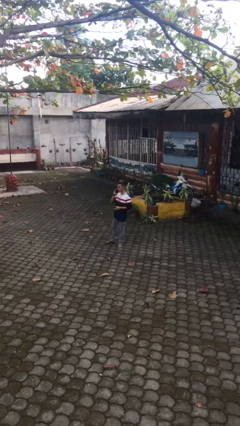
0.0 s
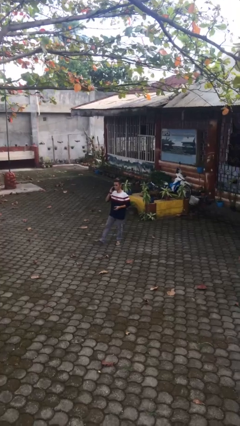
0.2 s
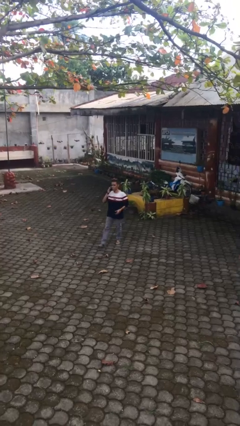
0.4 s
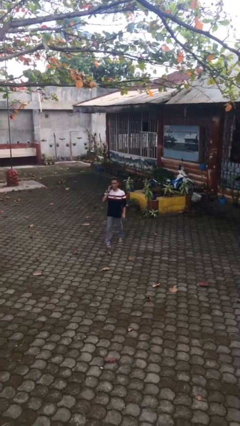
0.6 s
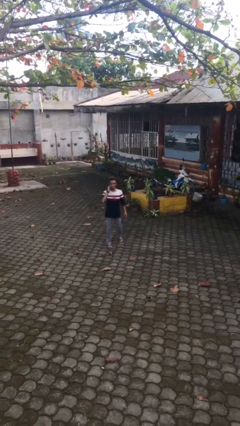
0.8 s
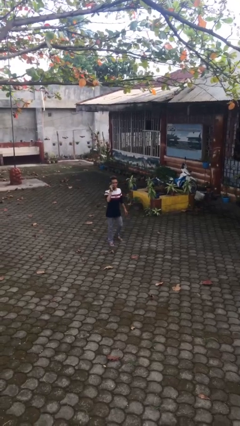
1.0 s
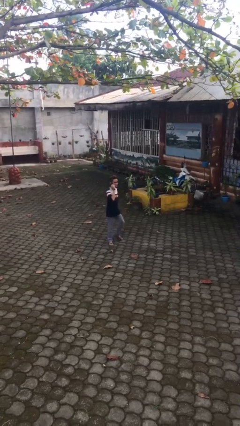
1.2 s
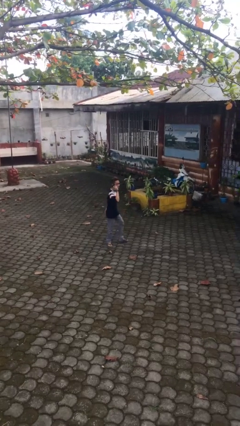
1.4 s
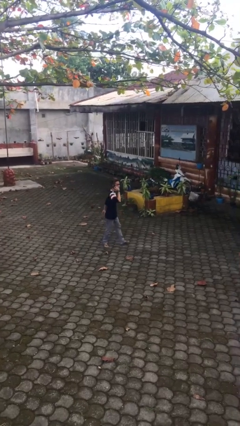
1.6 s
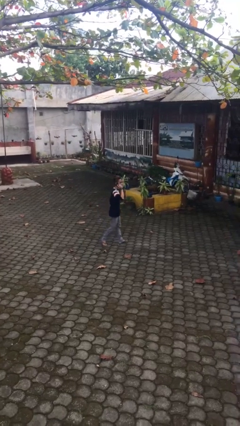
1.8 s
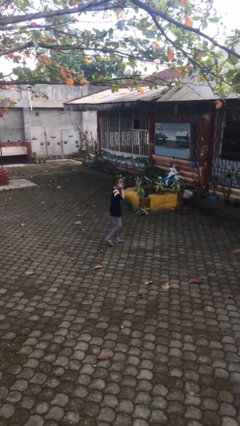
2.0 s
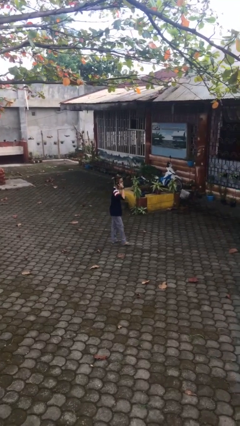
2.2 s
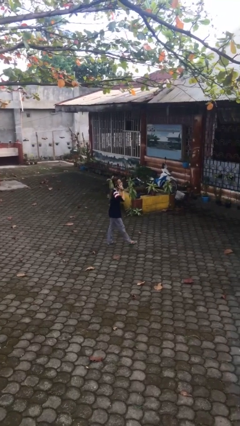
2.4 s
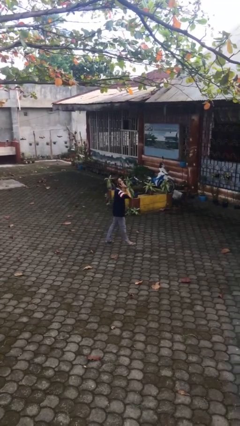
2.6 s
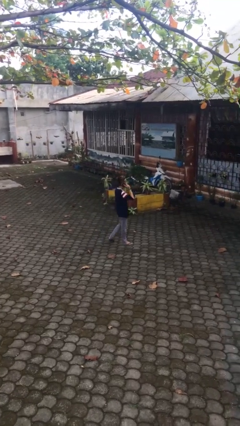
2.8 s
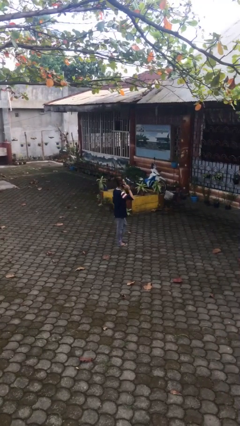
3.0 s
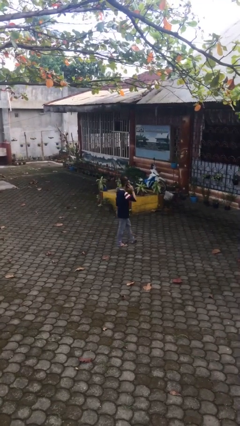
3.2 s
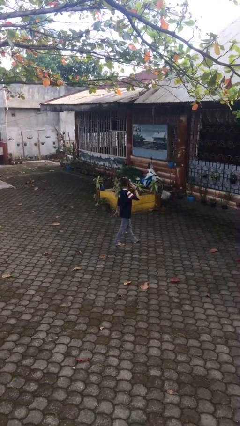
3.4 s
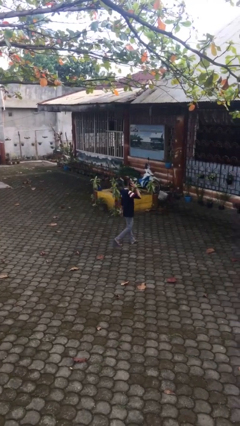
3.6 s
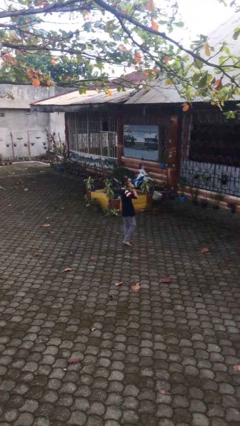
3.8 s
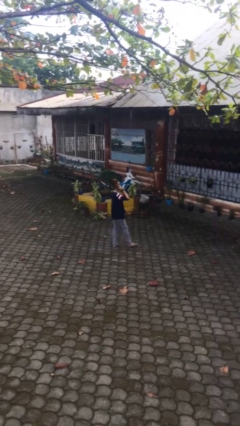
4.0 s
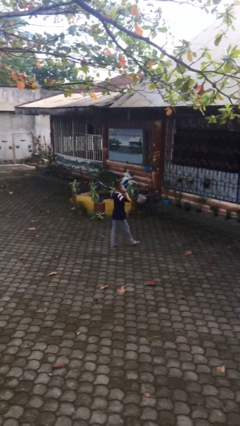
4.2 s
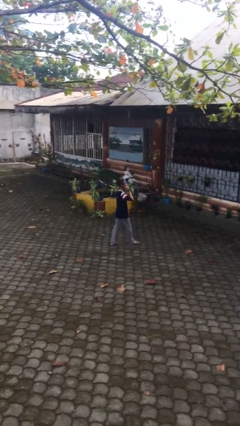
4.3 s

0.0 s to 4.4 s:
person talks on phone

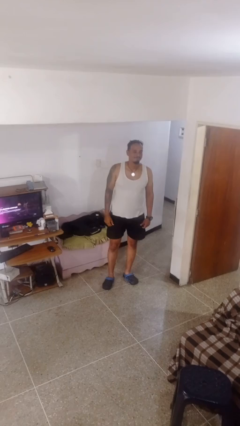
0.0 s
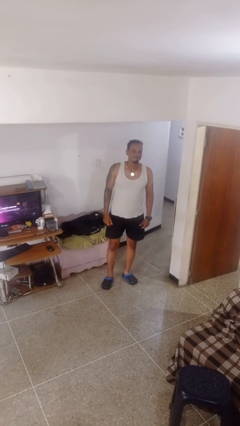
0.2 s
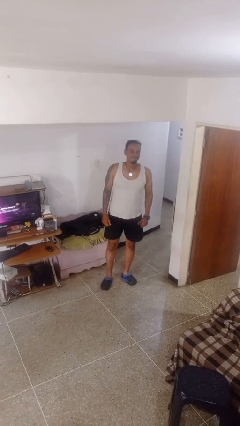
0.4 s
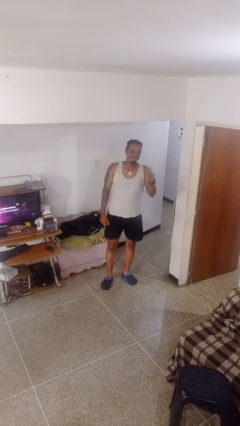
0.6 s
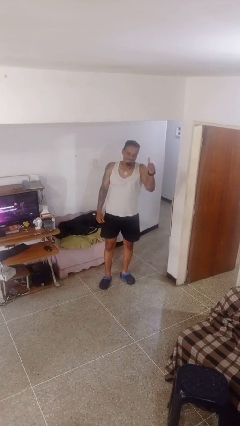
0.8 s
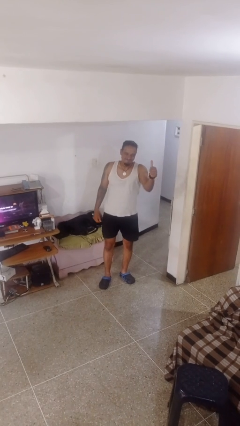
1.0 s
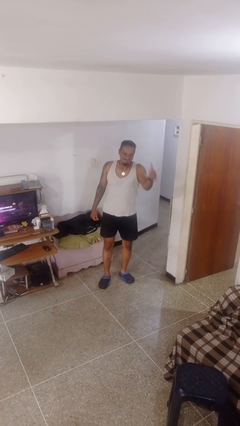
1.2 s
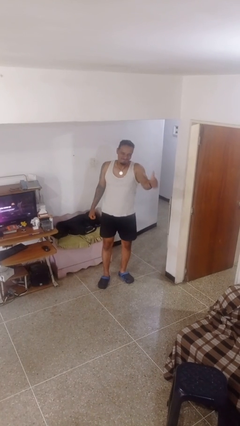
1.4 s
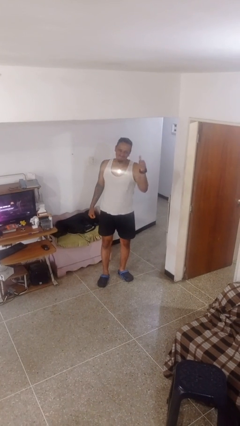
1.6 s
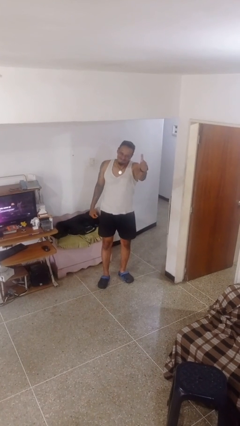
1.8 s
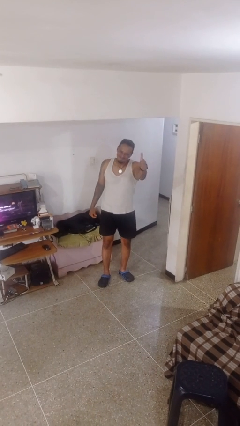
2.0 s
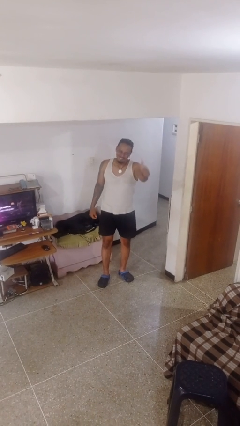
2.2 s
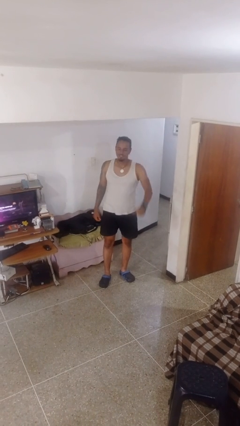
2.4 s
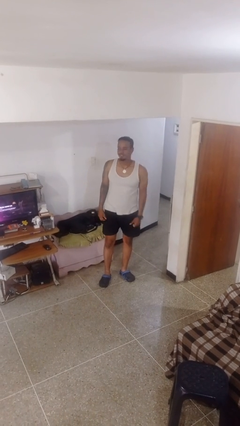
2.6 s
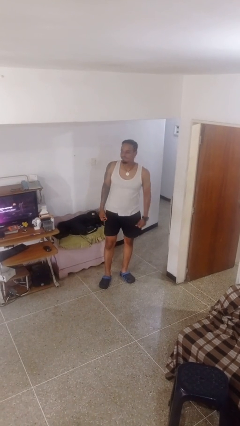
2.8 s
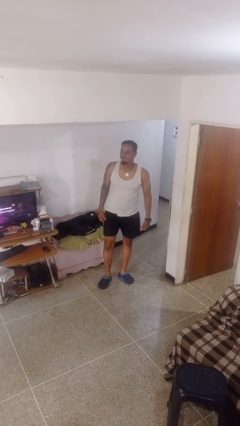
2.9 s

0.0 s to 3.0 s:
person gestures thumbs up

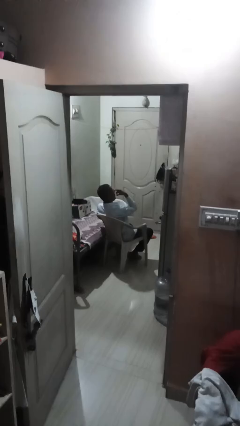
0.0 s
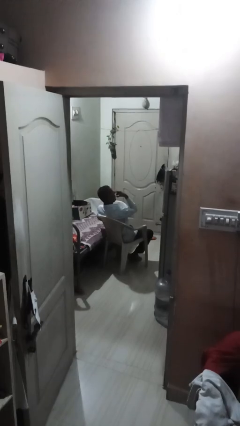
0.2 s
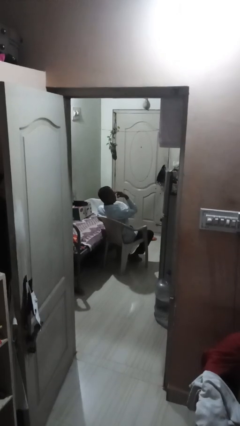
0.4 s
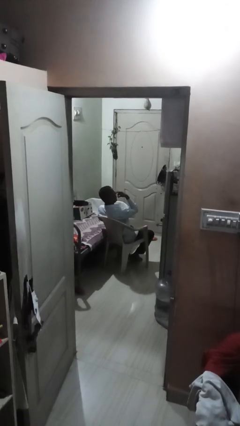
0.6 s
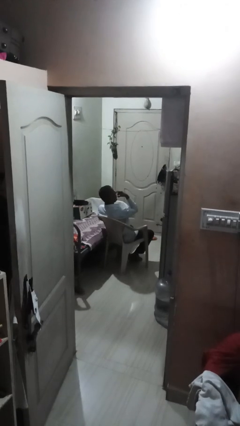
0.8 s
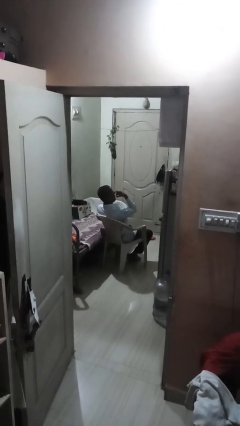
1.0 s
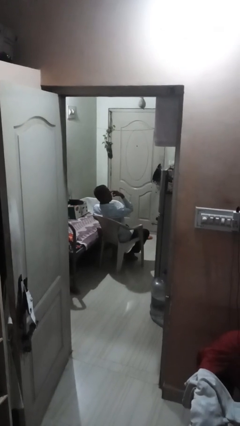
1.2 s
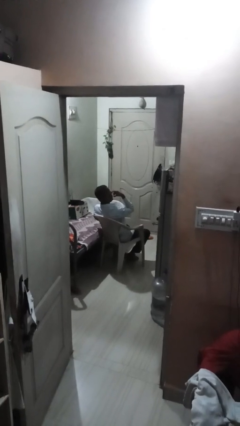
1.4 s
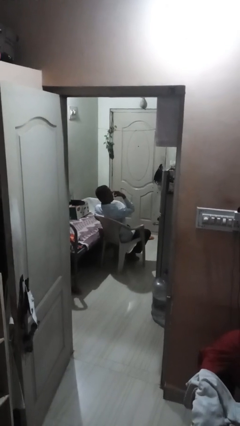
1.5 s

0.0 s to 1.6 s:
person gestures watch closely

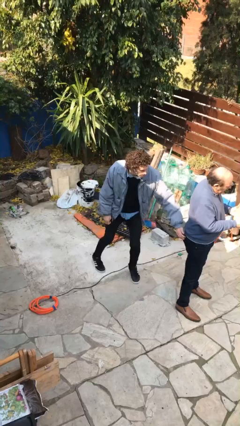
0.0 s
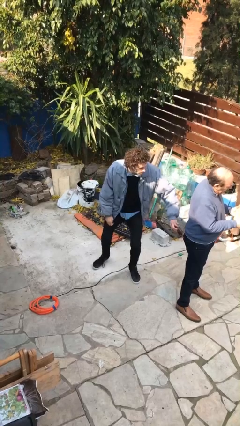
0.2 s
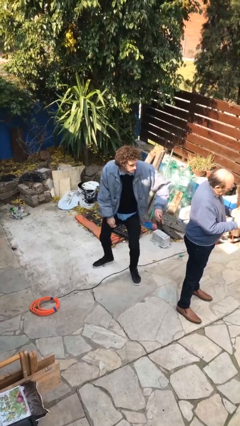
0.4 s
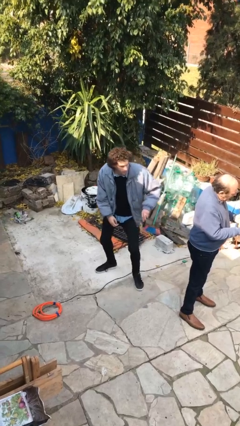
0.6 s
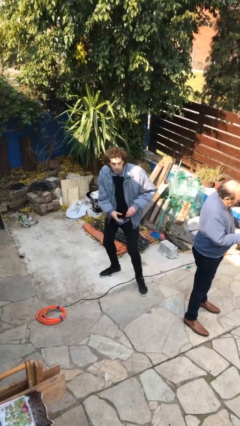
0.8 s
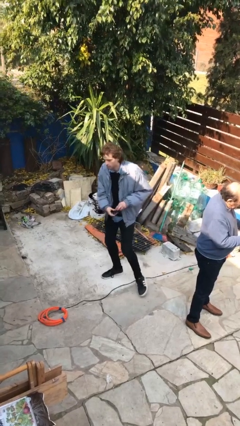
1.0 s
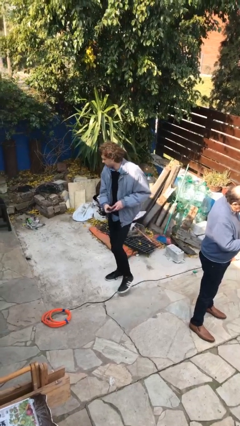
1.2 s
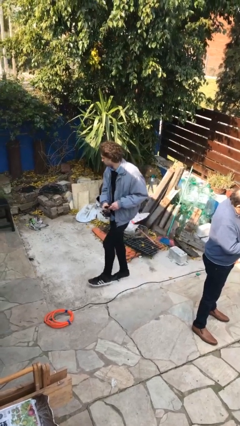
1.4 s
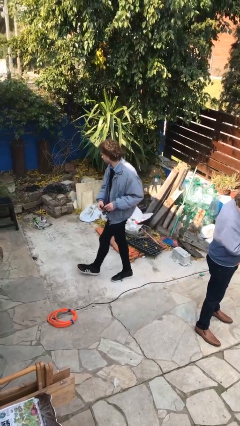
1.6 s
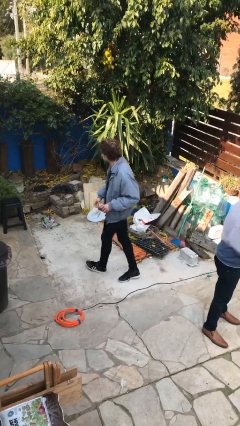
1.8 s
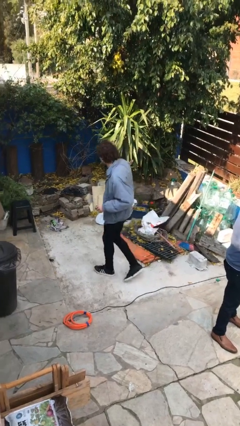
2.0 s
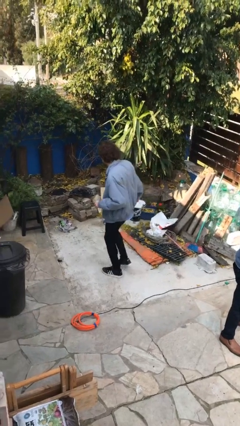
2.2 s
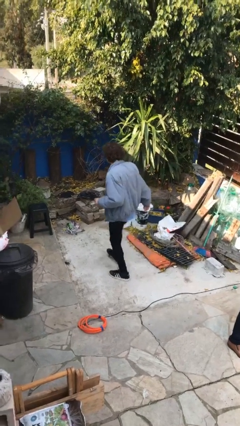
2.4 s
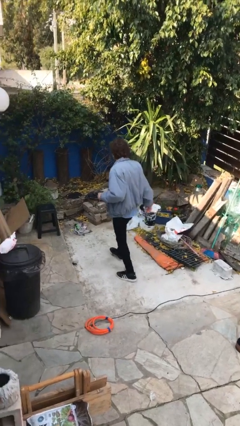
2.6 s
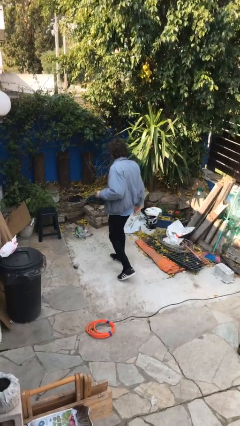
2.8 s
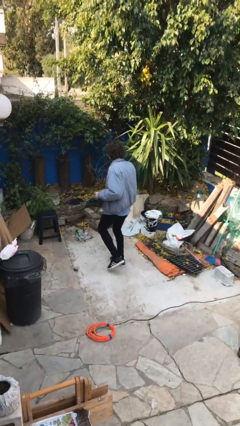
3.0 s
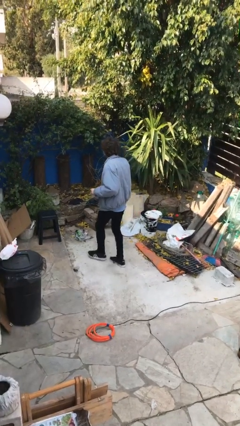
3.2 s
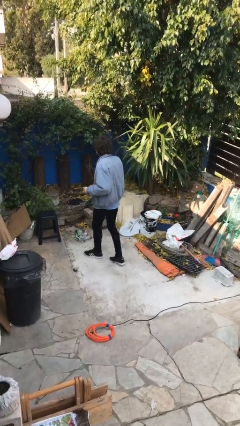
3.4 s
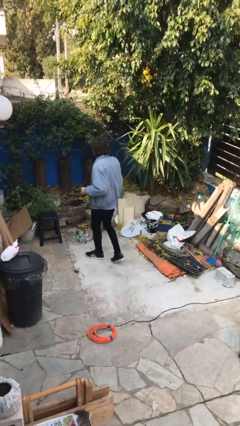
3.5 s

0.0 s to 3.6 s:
person steals object from person

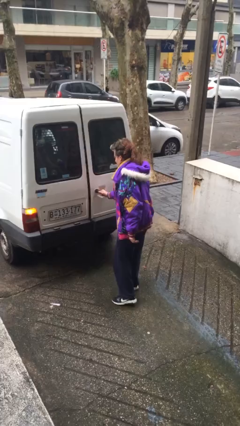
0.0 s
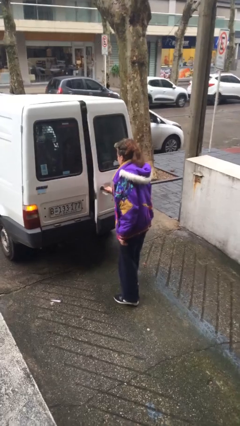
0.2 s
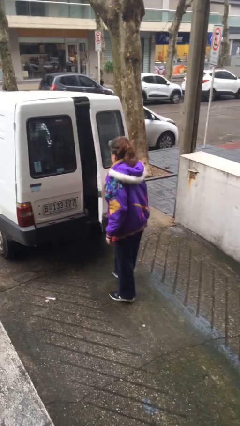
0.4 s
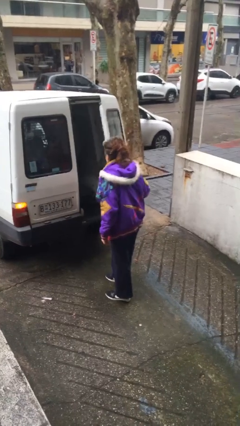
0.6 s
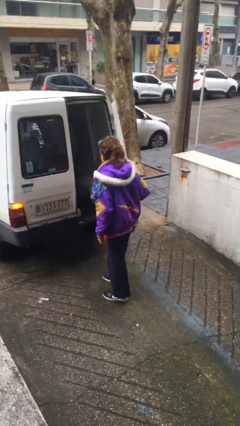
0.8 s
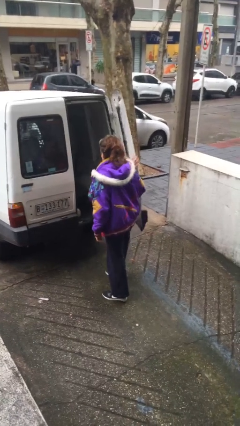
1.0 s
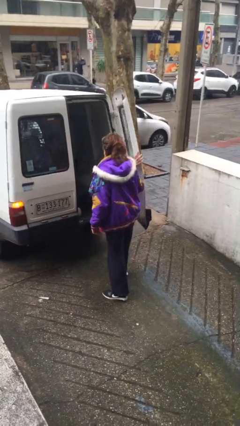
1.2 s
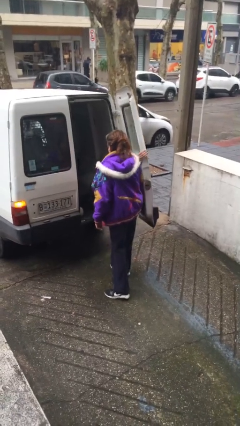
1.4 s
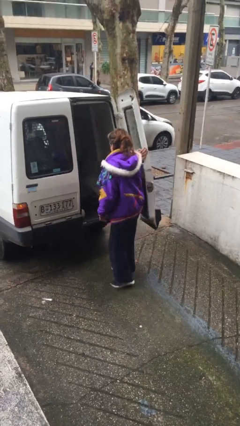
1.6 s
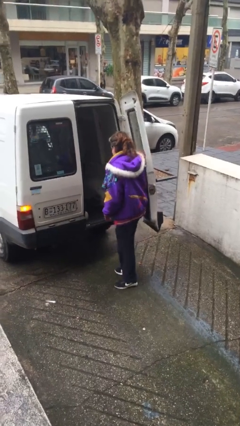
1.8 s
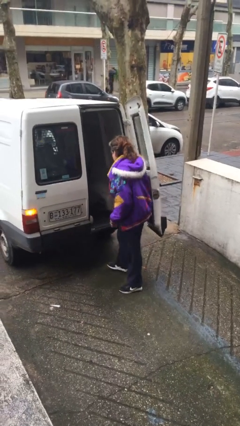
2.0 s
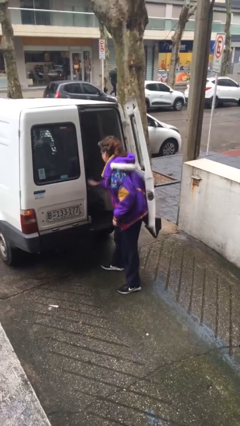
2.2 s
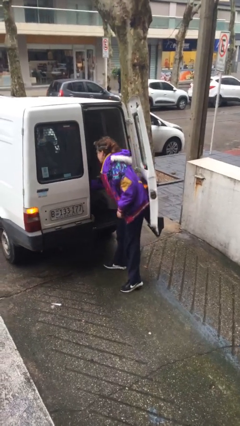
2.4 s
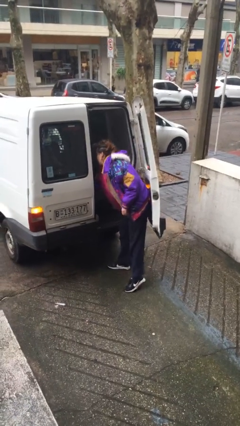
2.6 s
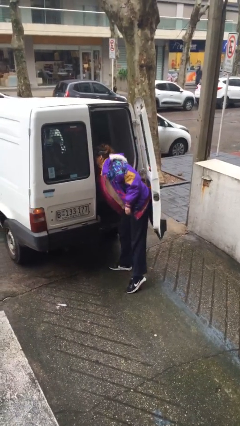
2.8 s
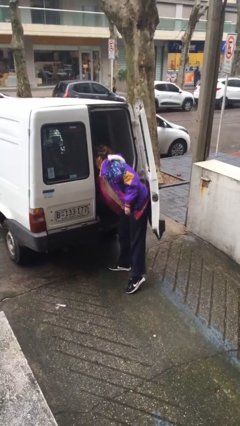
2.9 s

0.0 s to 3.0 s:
person opens car door

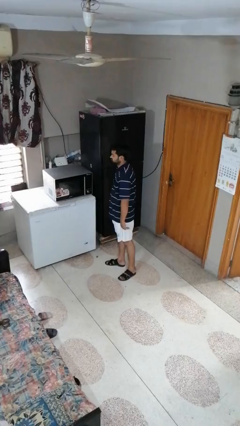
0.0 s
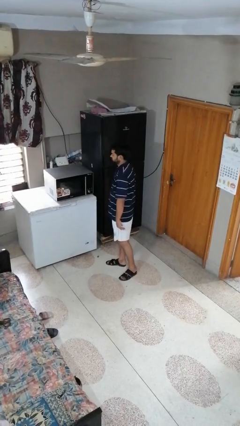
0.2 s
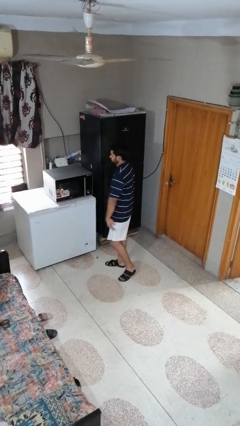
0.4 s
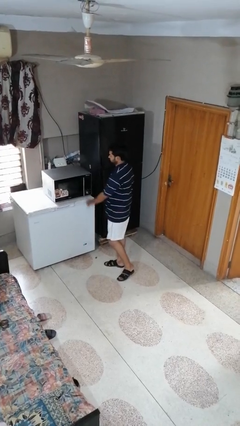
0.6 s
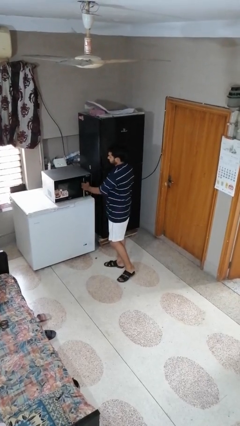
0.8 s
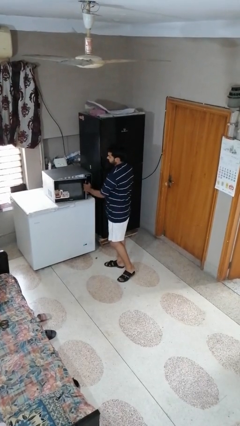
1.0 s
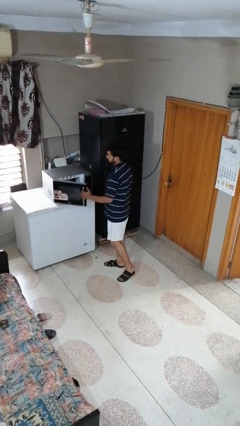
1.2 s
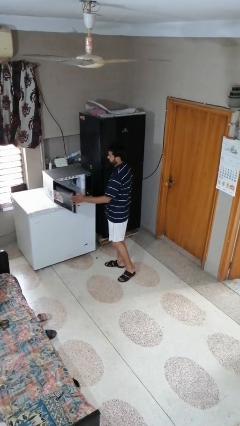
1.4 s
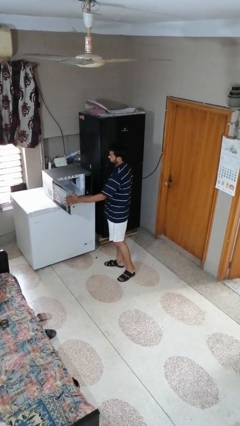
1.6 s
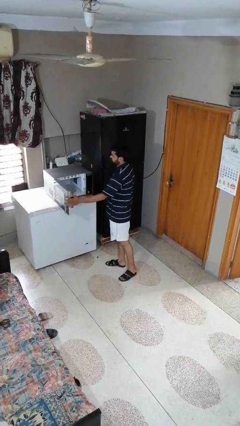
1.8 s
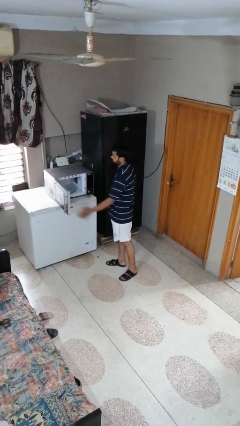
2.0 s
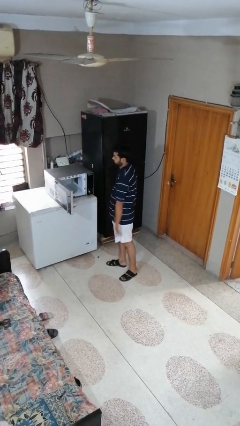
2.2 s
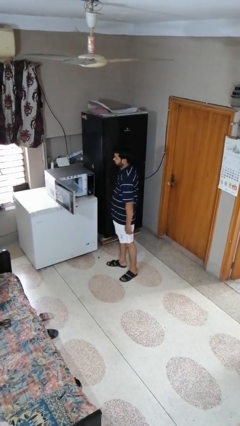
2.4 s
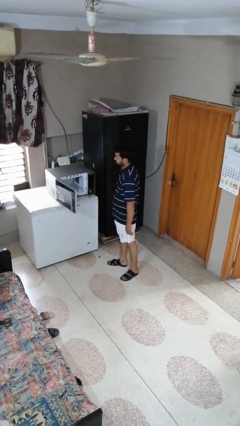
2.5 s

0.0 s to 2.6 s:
person opens microwave
